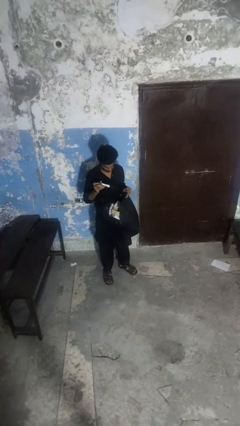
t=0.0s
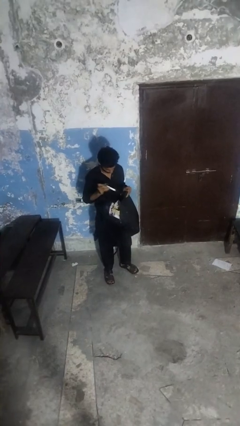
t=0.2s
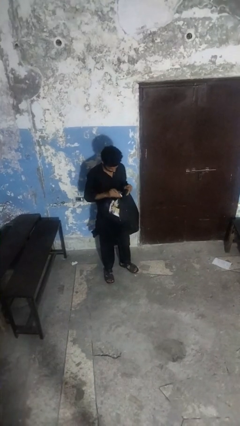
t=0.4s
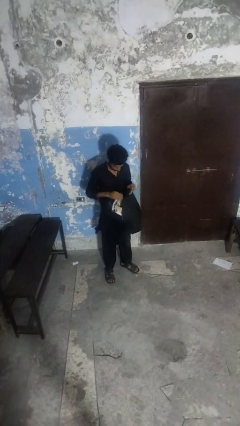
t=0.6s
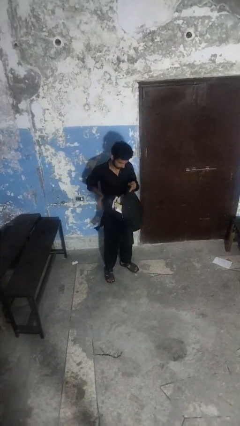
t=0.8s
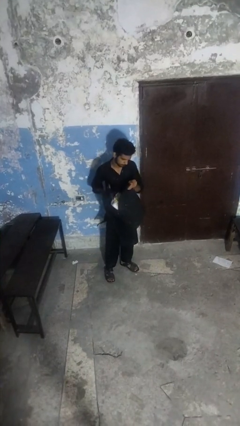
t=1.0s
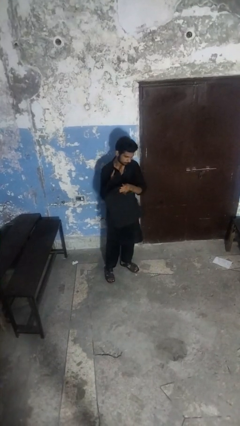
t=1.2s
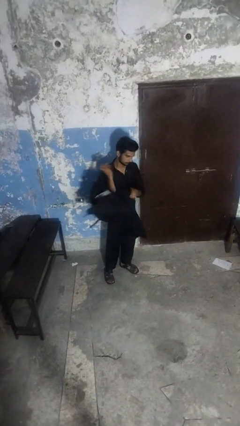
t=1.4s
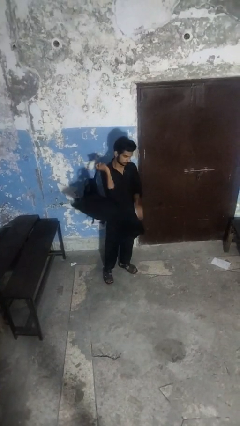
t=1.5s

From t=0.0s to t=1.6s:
person puts object into backpack

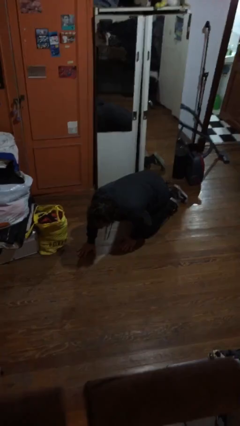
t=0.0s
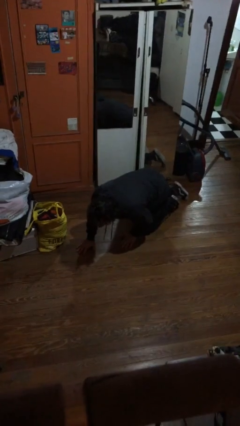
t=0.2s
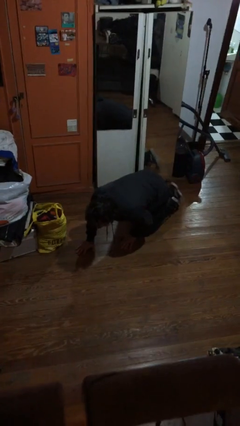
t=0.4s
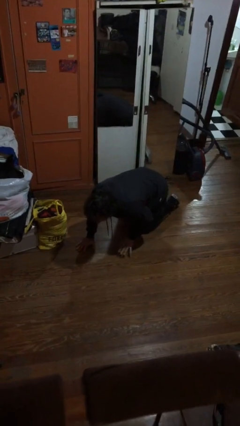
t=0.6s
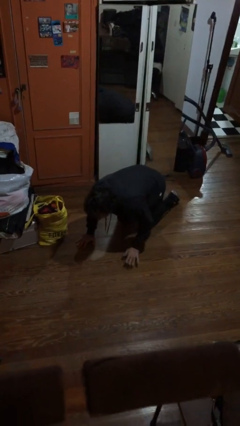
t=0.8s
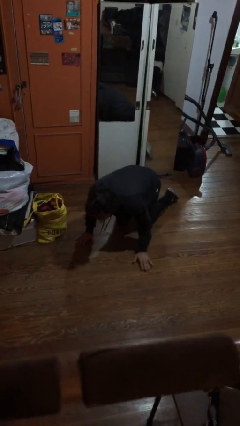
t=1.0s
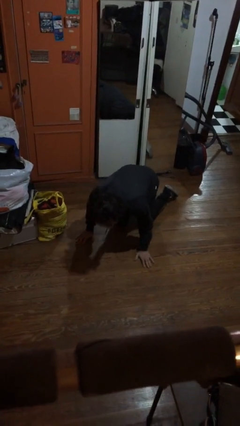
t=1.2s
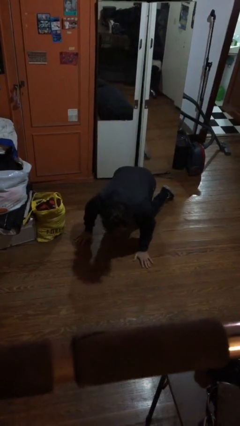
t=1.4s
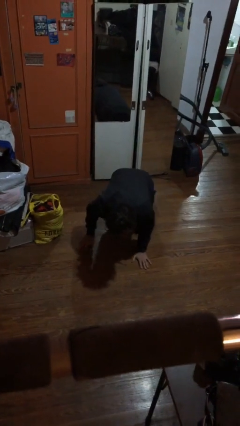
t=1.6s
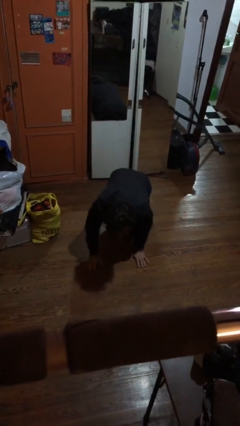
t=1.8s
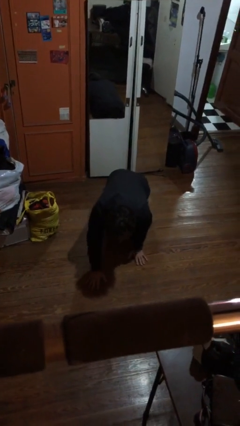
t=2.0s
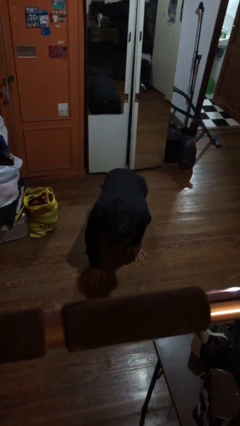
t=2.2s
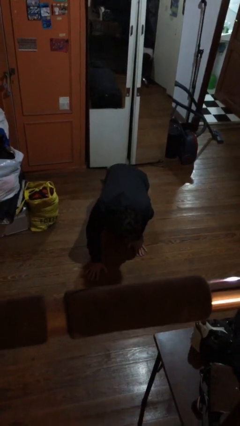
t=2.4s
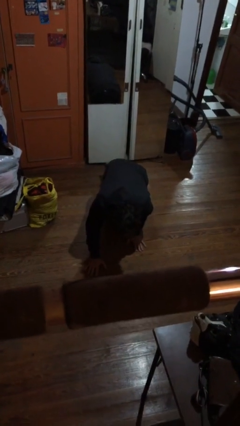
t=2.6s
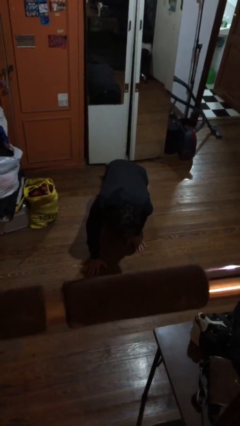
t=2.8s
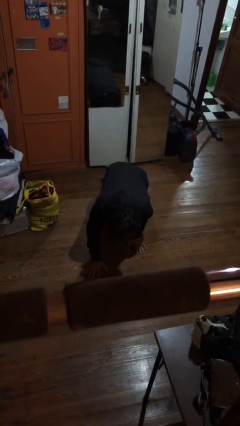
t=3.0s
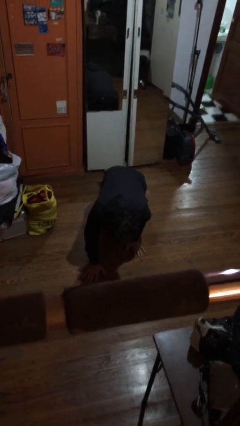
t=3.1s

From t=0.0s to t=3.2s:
person crawls

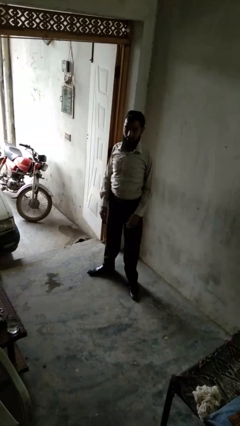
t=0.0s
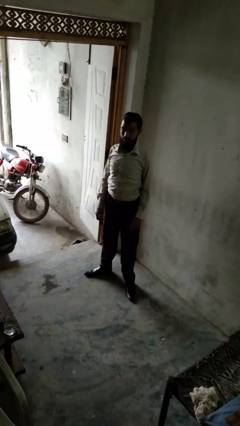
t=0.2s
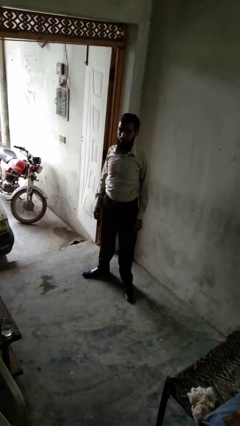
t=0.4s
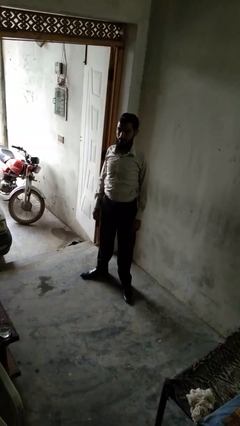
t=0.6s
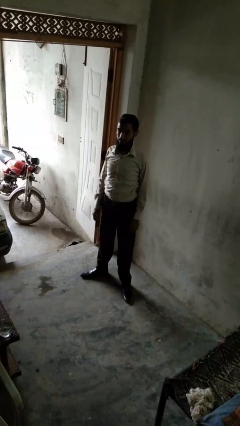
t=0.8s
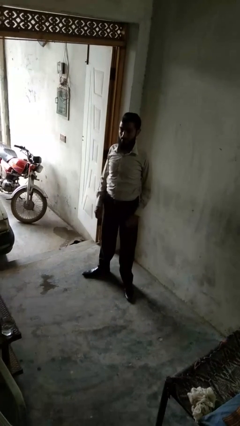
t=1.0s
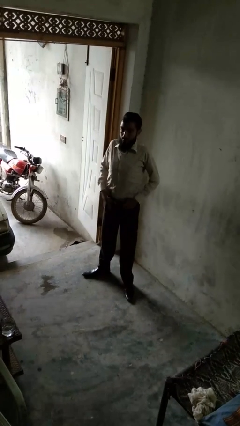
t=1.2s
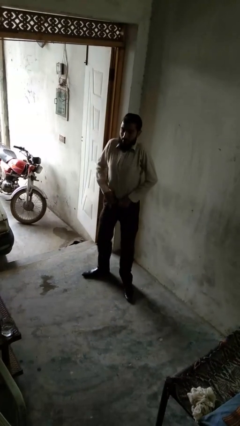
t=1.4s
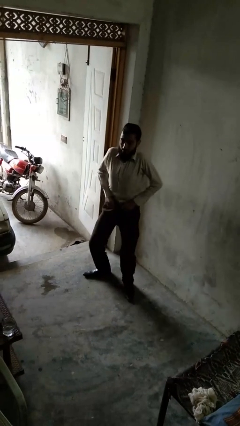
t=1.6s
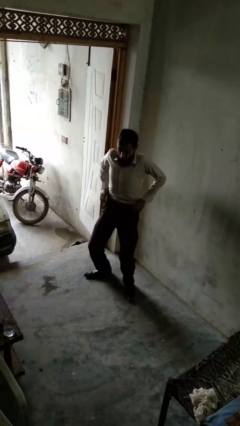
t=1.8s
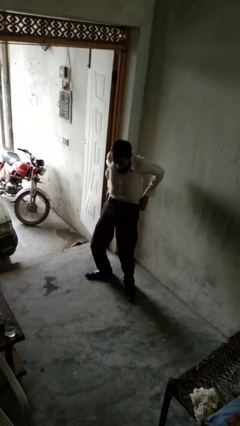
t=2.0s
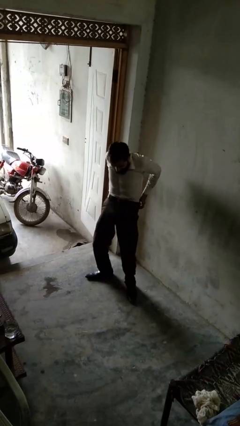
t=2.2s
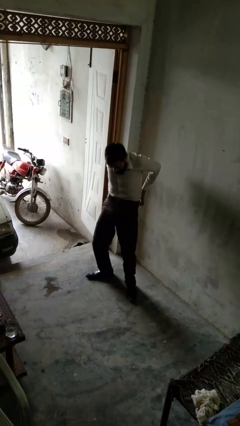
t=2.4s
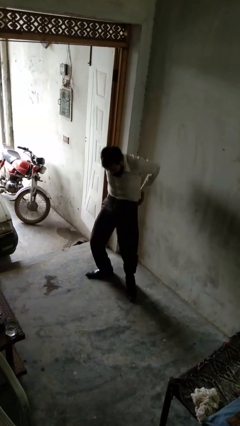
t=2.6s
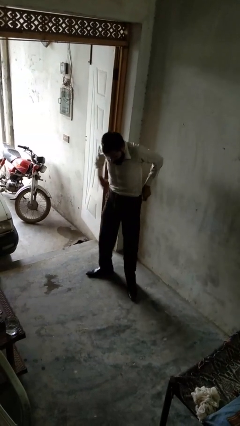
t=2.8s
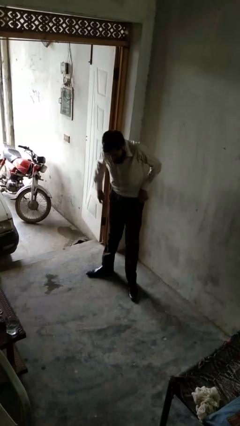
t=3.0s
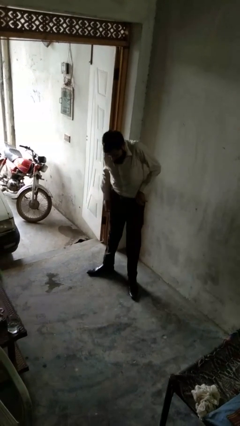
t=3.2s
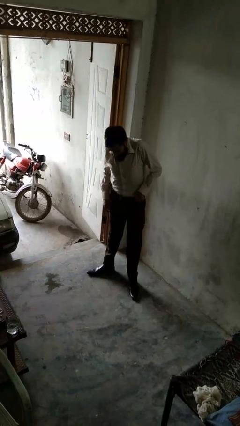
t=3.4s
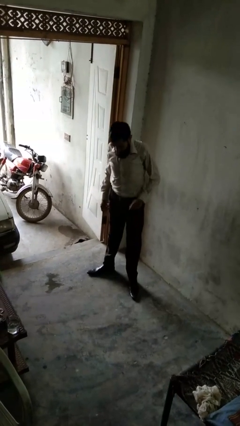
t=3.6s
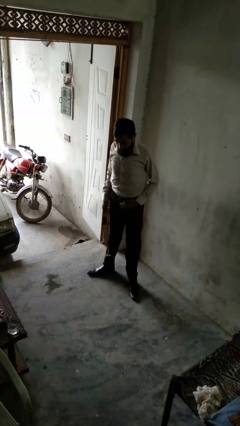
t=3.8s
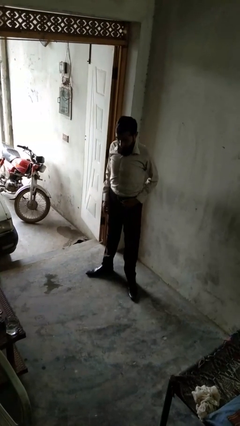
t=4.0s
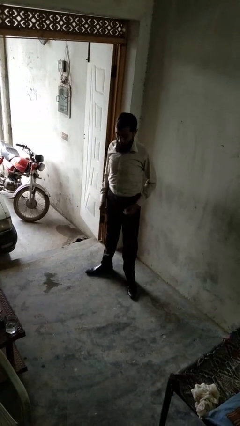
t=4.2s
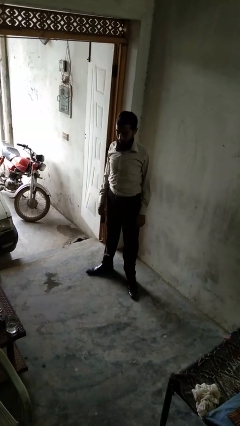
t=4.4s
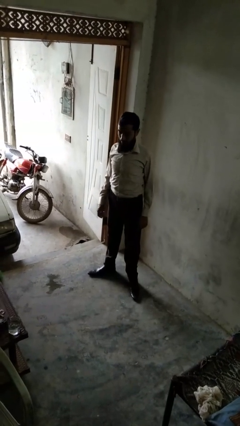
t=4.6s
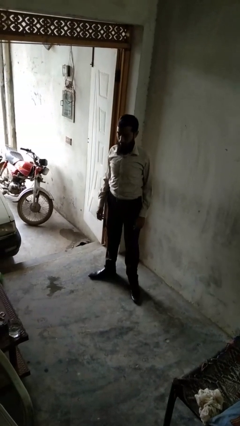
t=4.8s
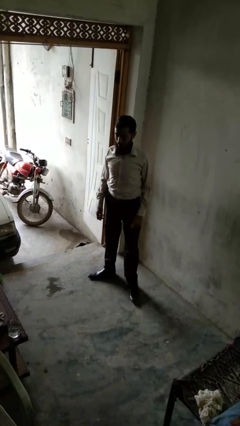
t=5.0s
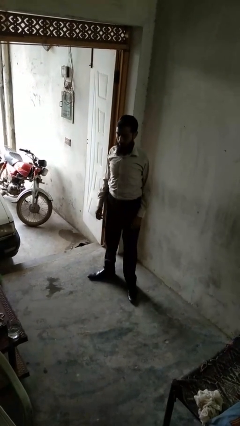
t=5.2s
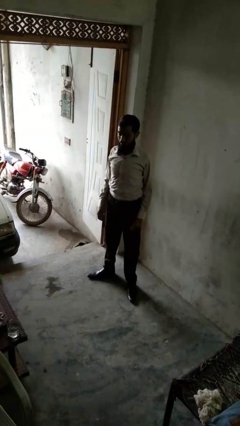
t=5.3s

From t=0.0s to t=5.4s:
person hikes up pants

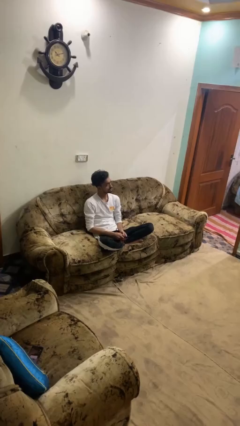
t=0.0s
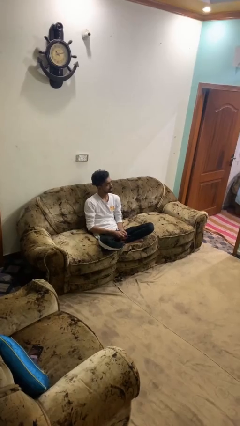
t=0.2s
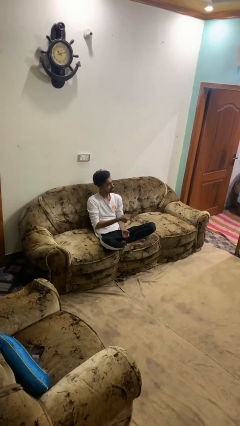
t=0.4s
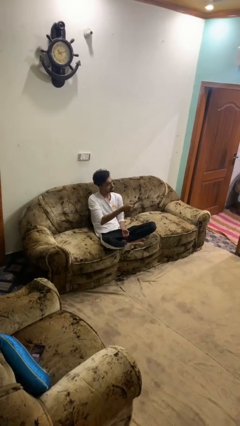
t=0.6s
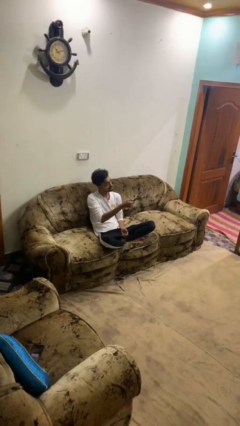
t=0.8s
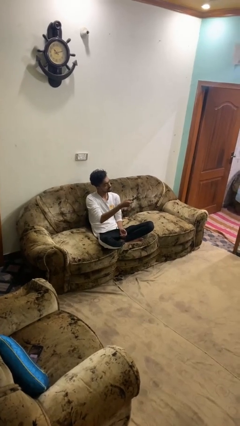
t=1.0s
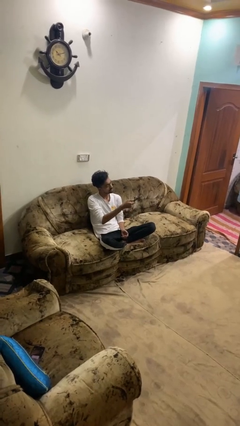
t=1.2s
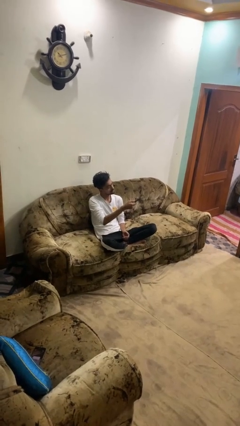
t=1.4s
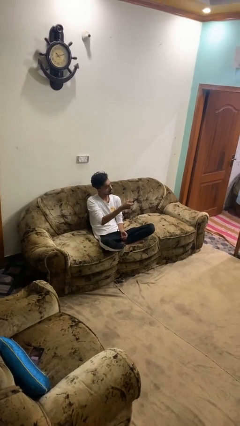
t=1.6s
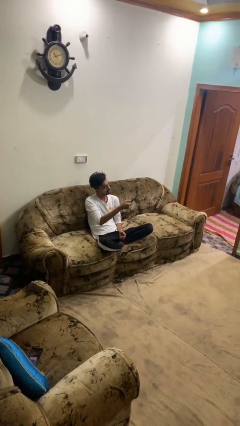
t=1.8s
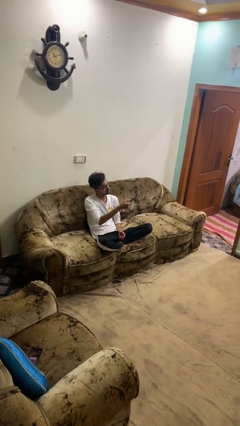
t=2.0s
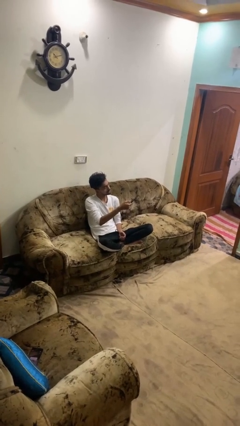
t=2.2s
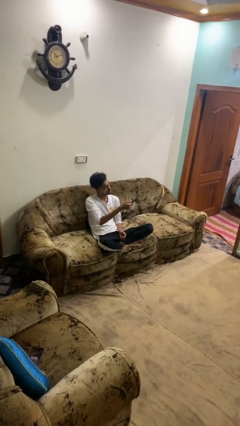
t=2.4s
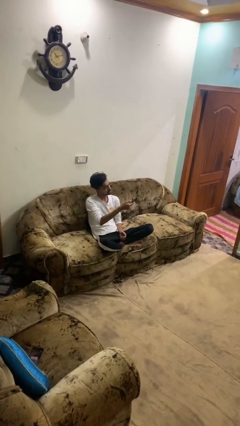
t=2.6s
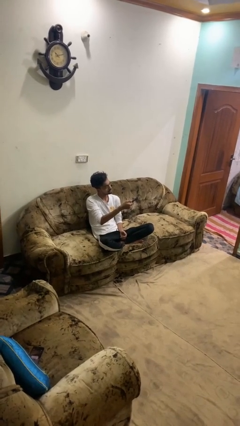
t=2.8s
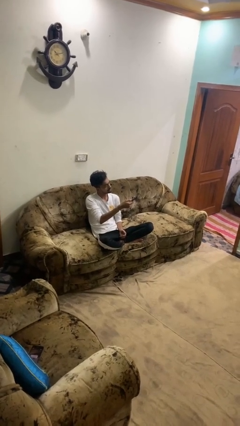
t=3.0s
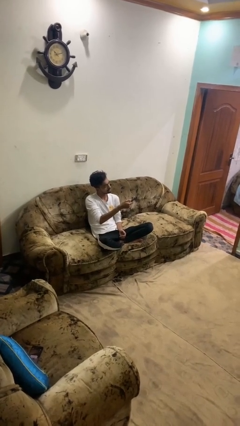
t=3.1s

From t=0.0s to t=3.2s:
person uses television remote

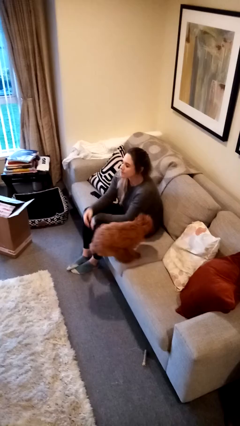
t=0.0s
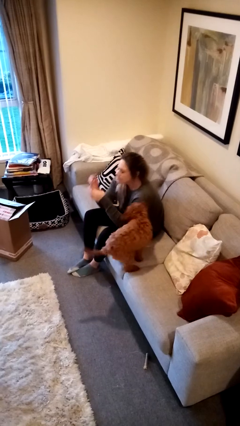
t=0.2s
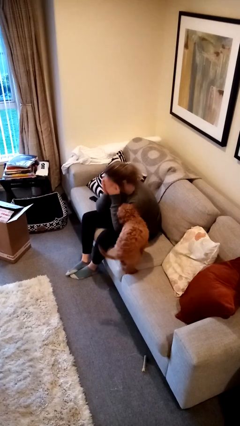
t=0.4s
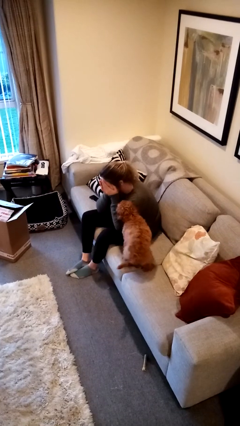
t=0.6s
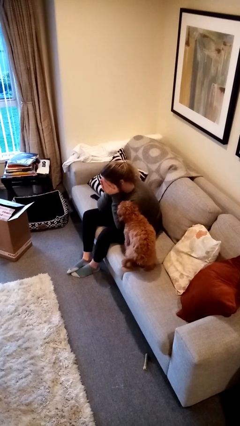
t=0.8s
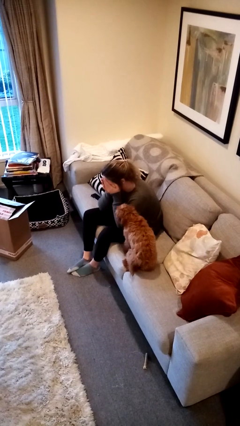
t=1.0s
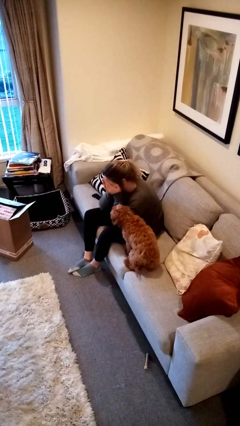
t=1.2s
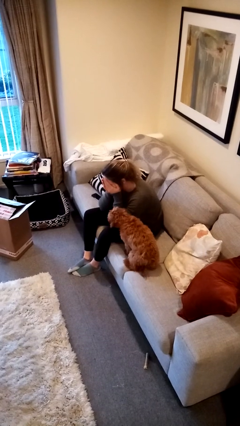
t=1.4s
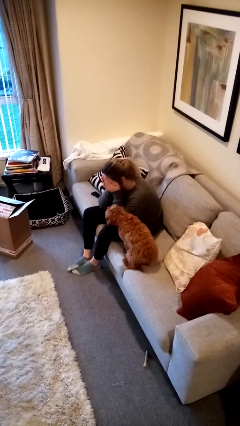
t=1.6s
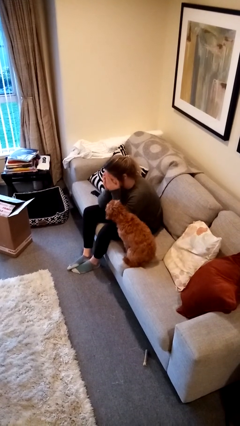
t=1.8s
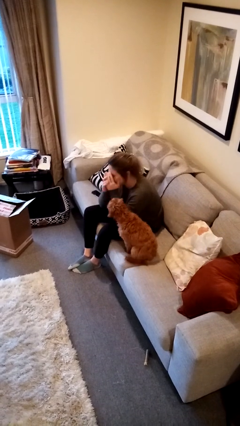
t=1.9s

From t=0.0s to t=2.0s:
person covers face with hands

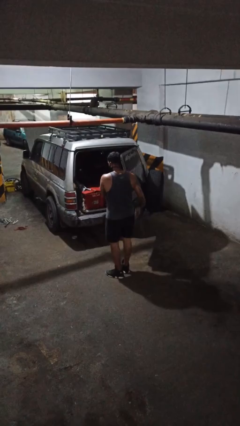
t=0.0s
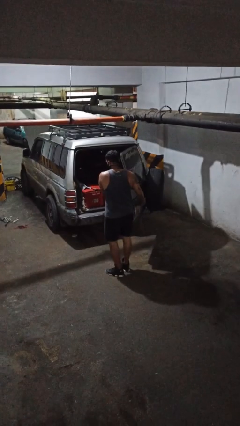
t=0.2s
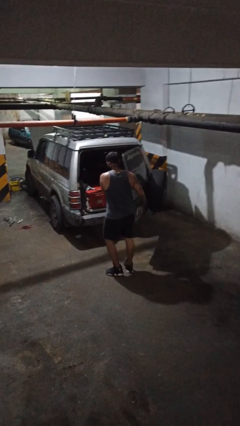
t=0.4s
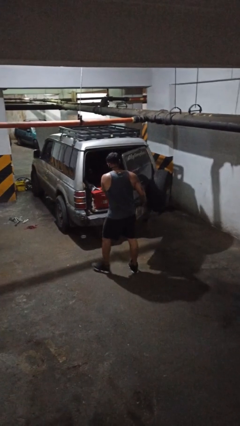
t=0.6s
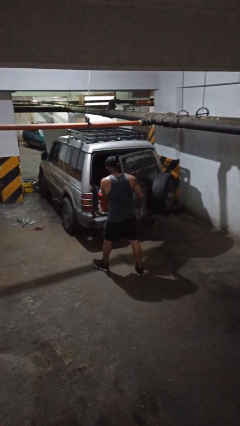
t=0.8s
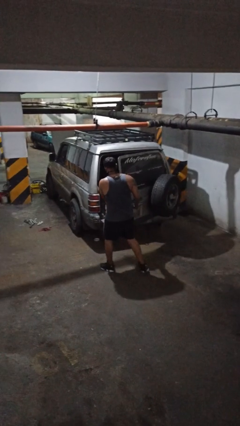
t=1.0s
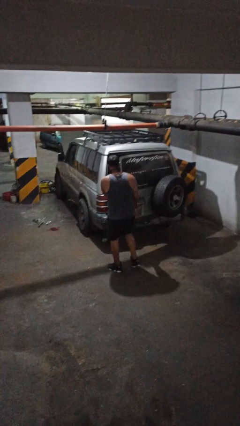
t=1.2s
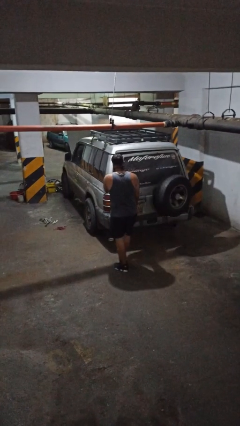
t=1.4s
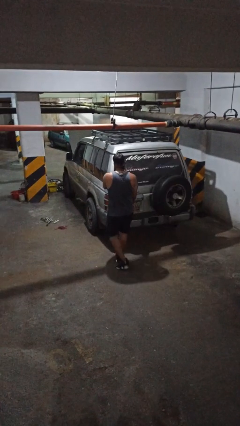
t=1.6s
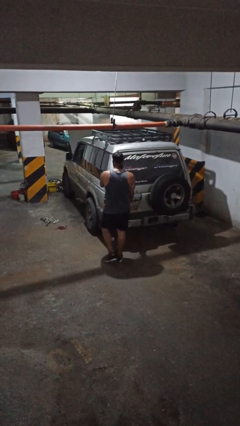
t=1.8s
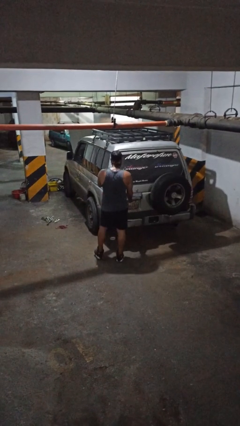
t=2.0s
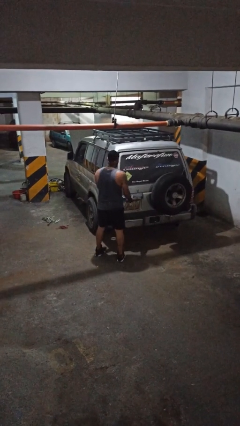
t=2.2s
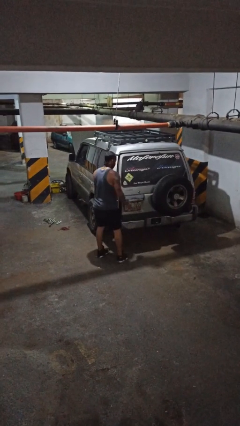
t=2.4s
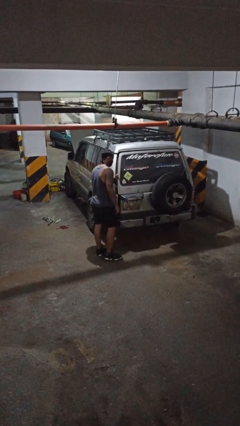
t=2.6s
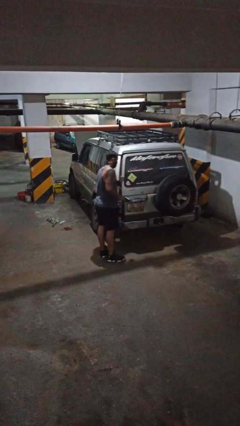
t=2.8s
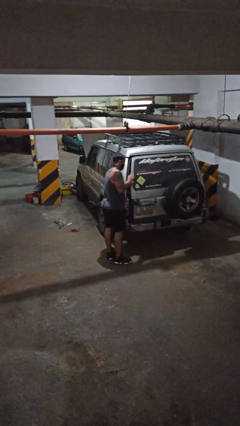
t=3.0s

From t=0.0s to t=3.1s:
person closes car trunk
